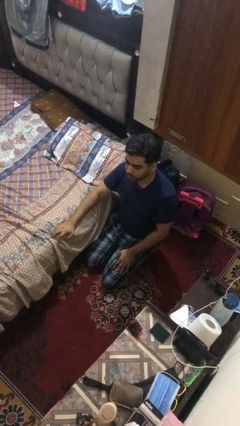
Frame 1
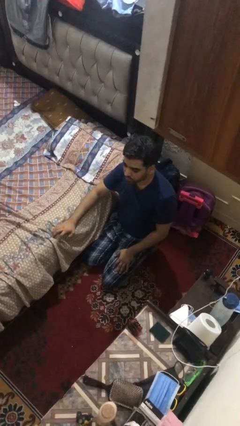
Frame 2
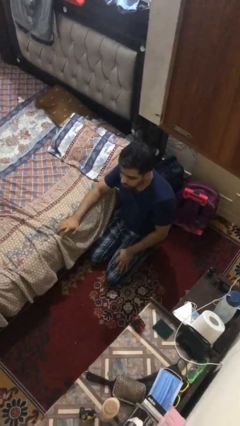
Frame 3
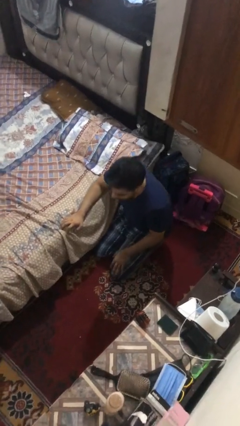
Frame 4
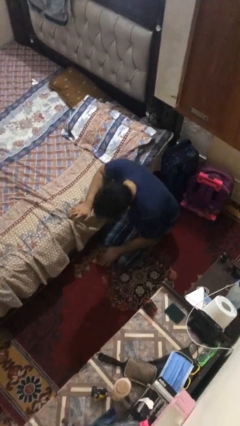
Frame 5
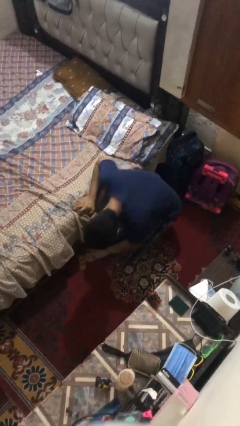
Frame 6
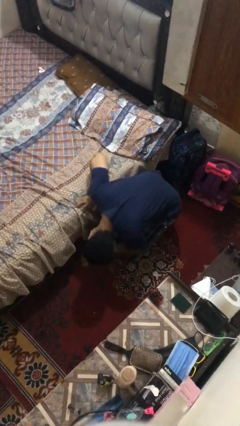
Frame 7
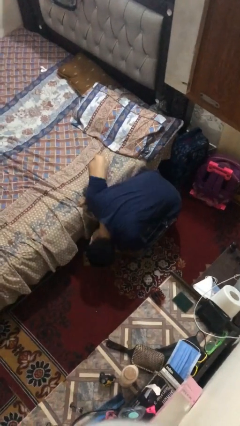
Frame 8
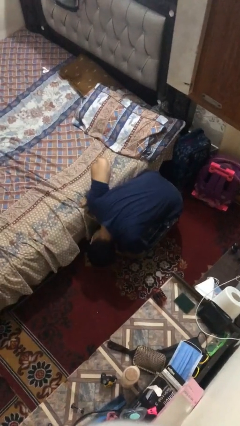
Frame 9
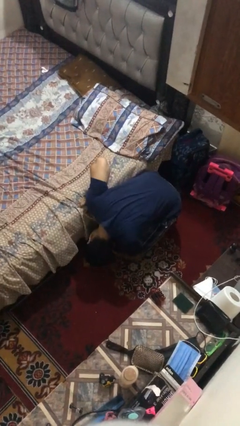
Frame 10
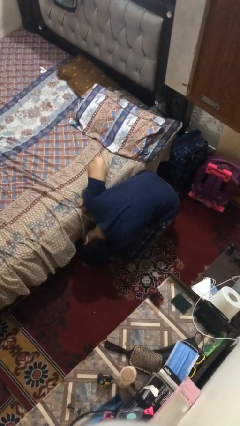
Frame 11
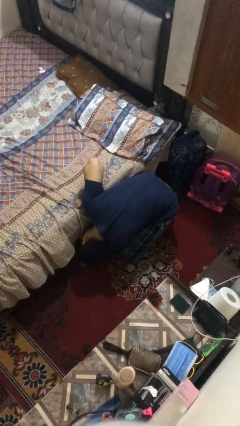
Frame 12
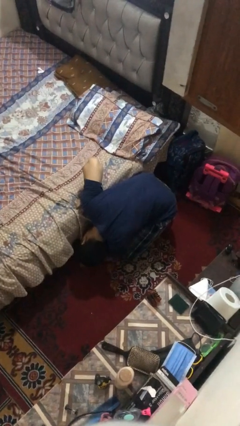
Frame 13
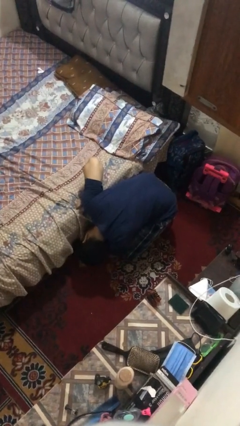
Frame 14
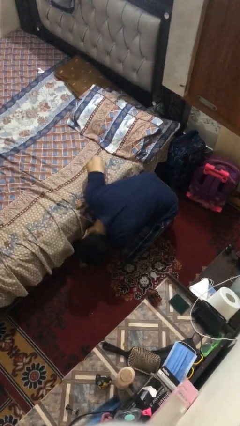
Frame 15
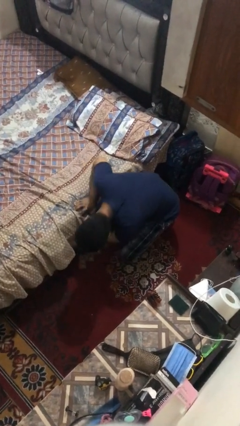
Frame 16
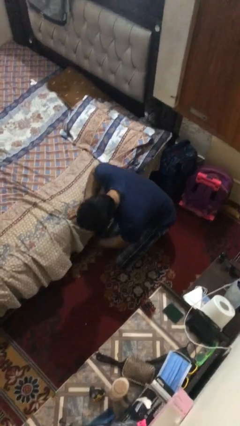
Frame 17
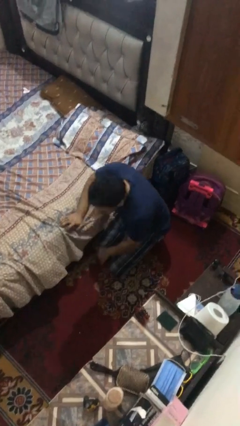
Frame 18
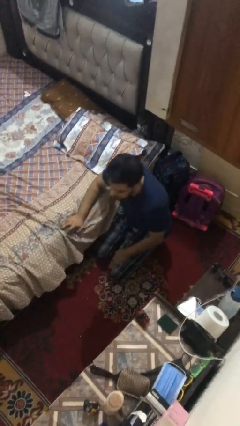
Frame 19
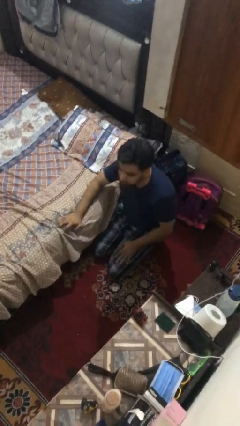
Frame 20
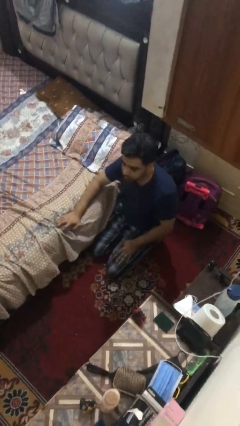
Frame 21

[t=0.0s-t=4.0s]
person searches under bed

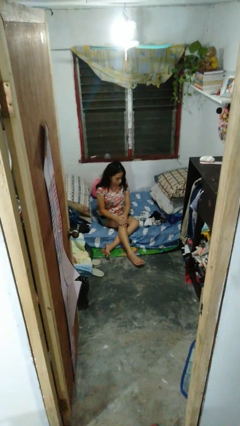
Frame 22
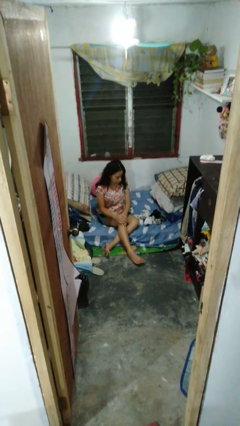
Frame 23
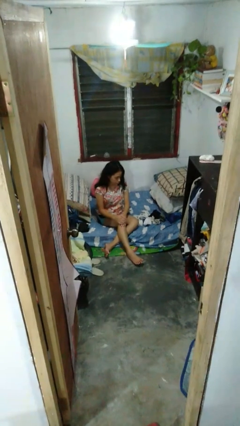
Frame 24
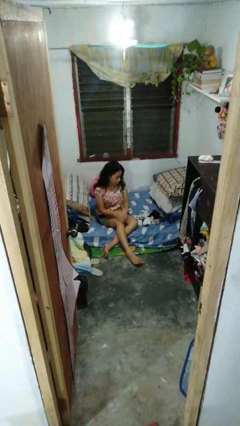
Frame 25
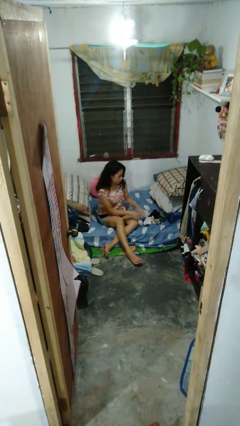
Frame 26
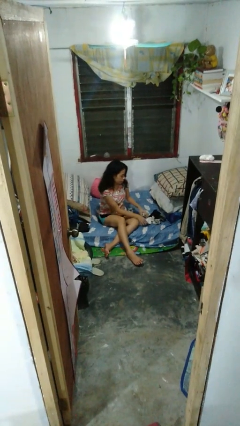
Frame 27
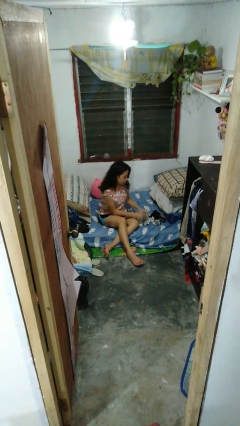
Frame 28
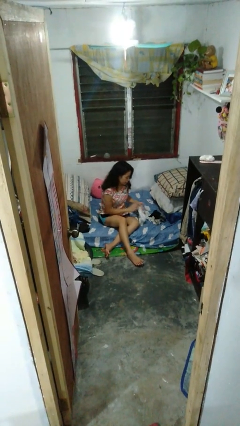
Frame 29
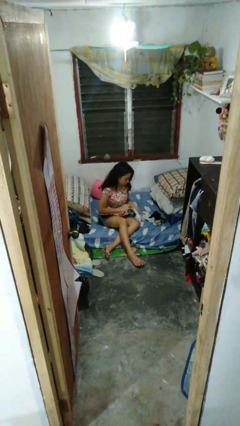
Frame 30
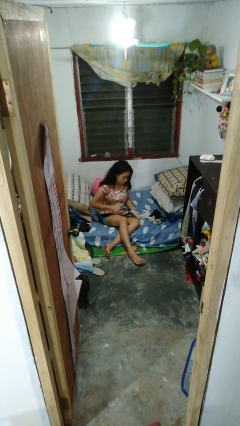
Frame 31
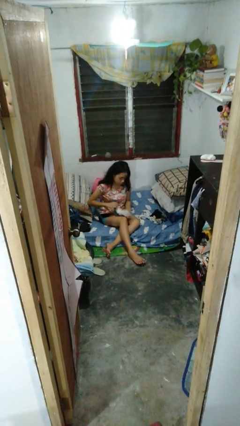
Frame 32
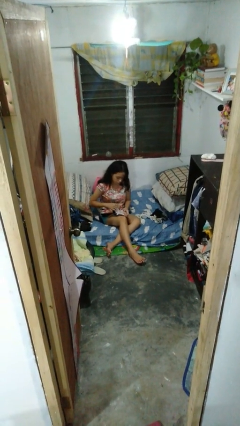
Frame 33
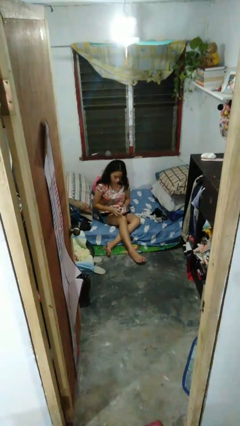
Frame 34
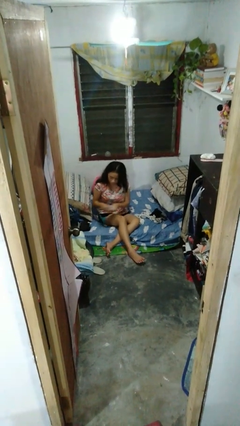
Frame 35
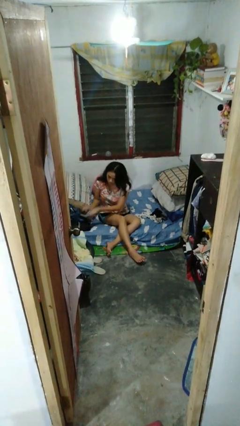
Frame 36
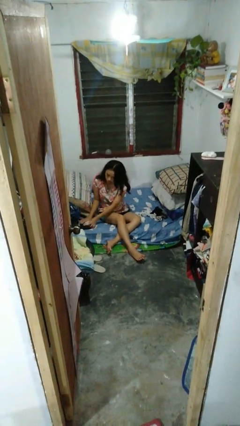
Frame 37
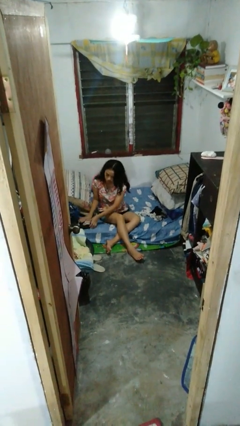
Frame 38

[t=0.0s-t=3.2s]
person folds socks

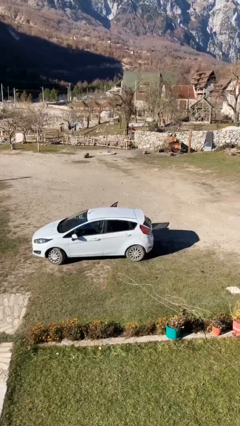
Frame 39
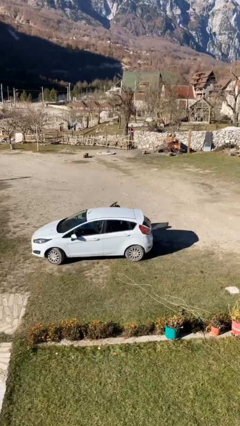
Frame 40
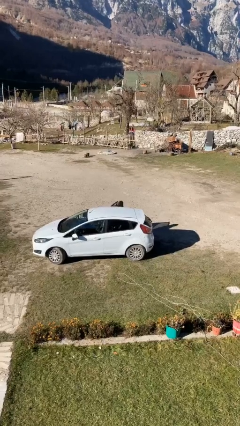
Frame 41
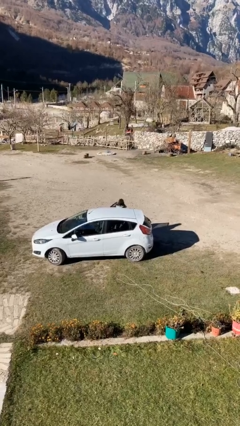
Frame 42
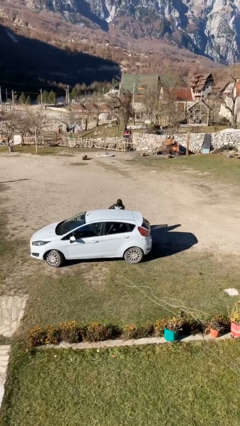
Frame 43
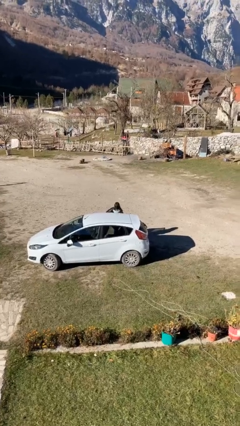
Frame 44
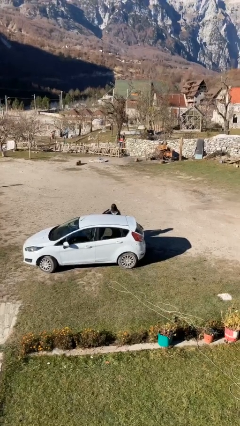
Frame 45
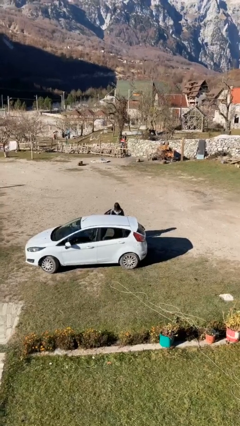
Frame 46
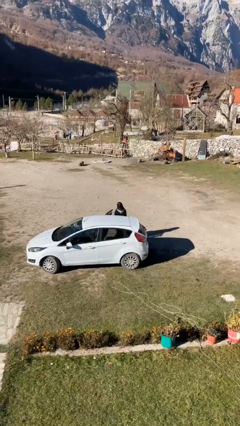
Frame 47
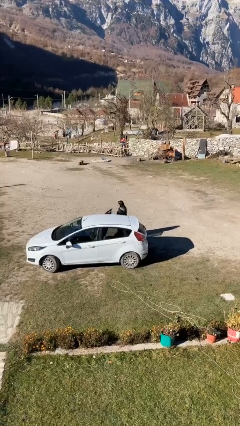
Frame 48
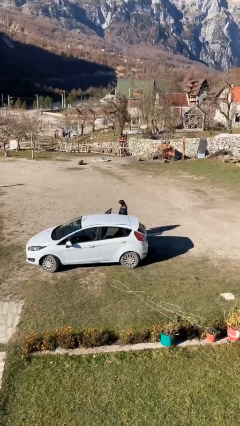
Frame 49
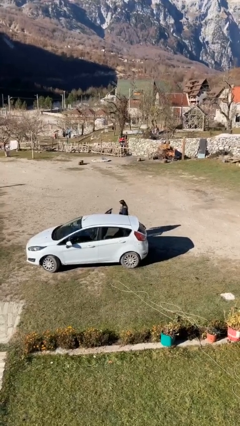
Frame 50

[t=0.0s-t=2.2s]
person exits car

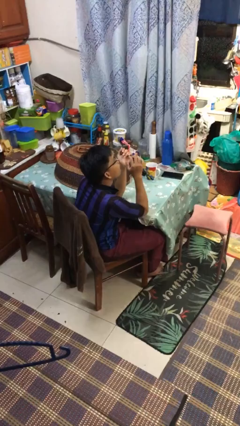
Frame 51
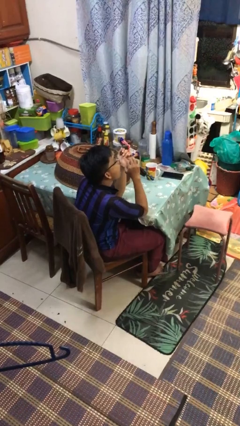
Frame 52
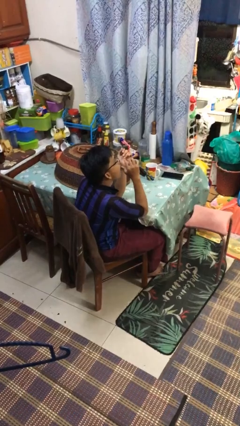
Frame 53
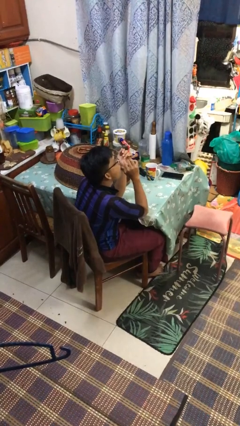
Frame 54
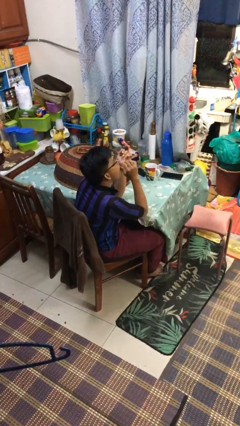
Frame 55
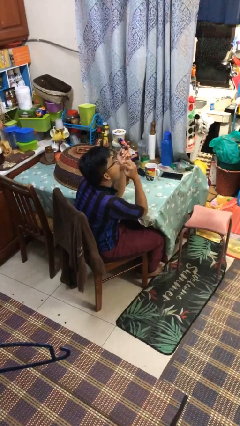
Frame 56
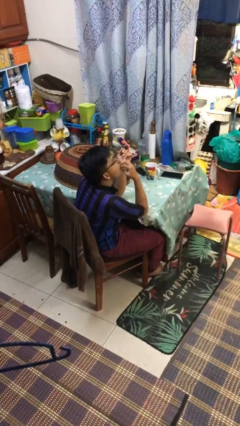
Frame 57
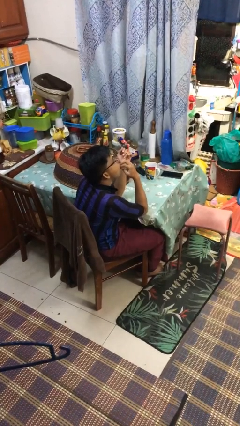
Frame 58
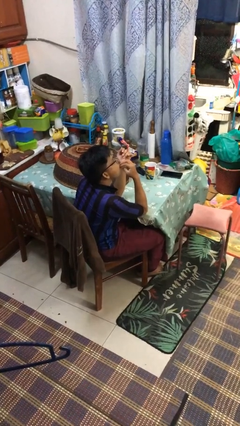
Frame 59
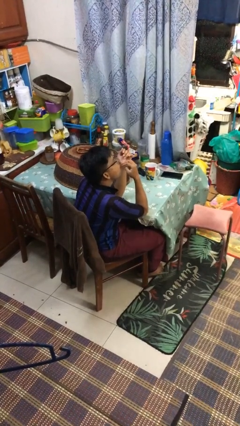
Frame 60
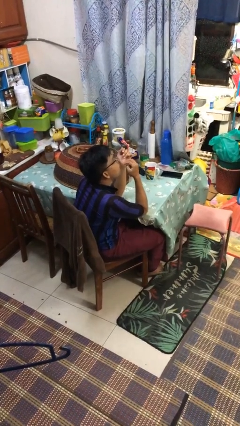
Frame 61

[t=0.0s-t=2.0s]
person licks fingers

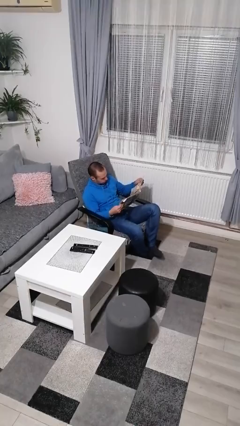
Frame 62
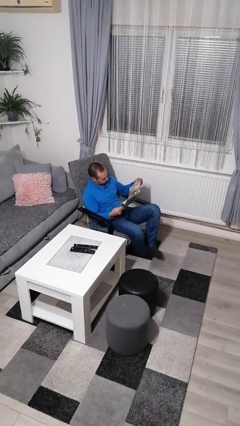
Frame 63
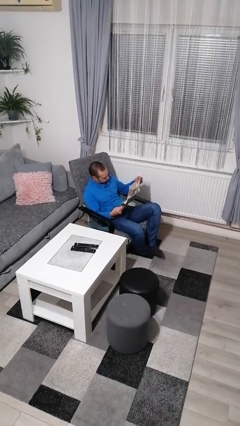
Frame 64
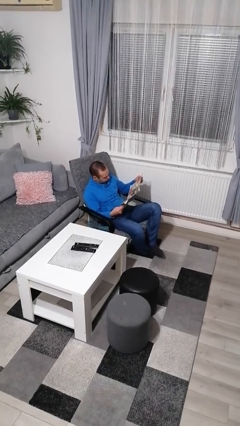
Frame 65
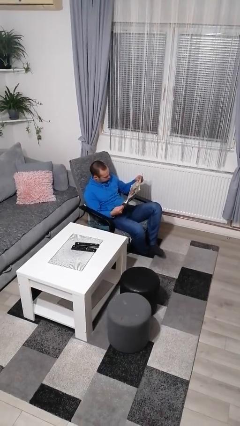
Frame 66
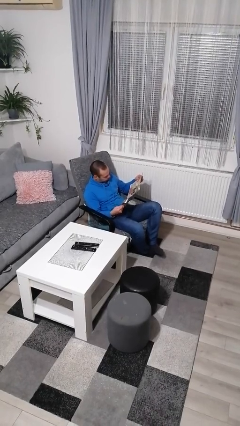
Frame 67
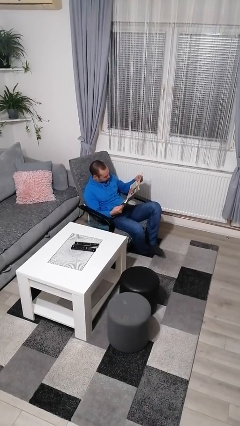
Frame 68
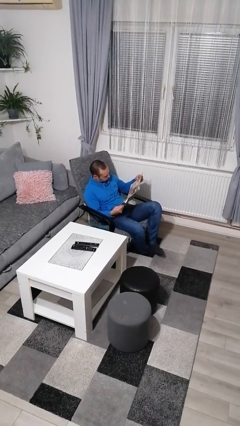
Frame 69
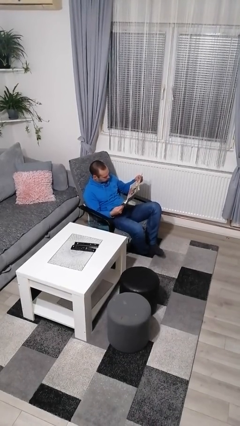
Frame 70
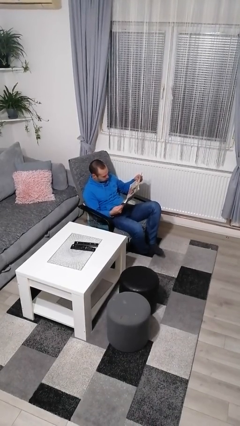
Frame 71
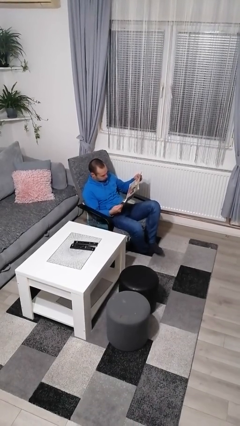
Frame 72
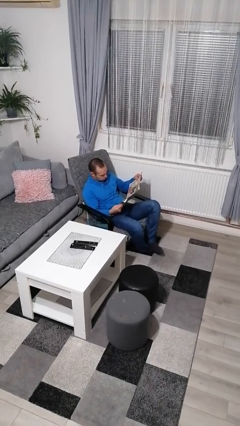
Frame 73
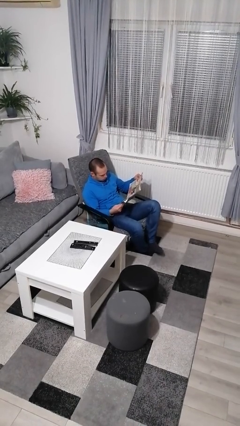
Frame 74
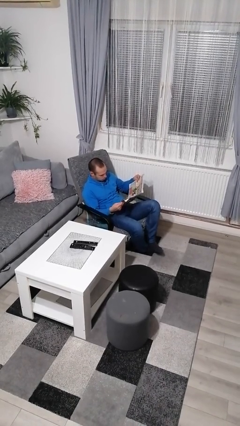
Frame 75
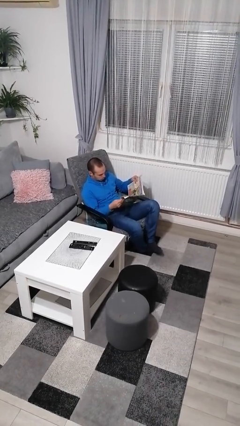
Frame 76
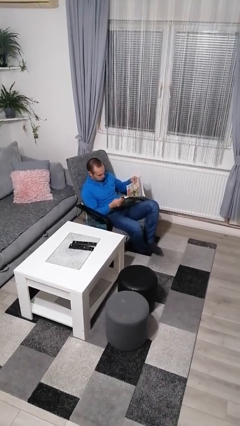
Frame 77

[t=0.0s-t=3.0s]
person reads newspaper

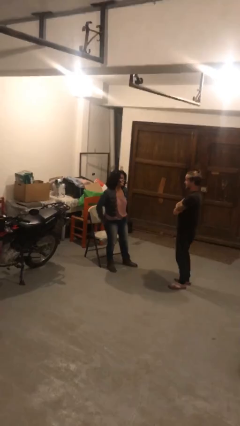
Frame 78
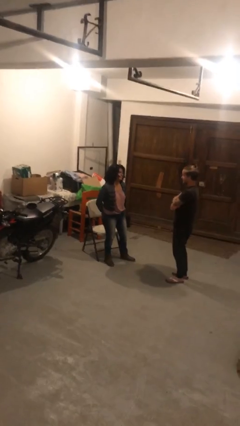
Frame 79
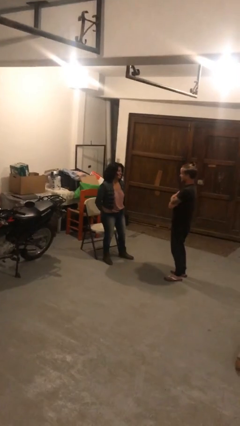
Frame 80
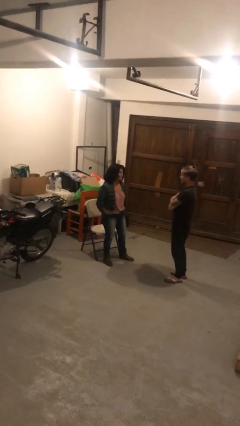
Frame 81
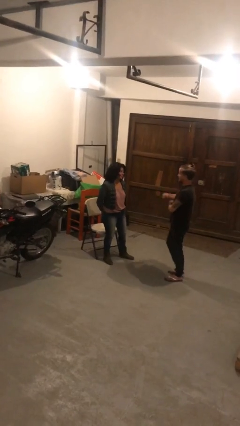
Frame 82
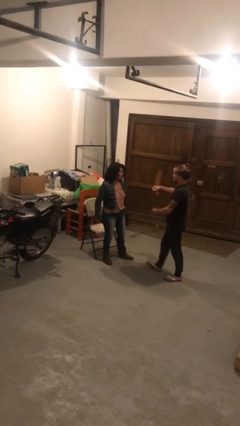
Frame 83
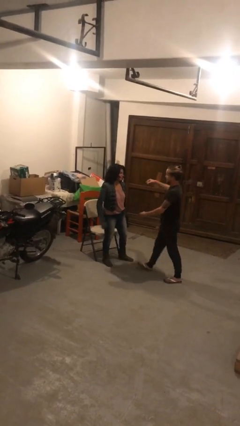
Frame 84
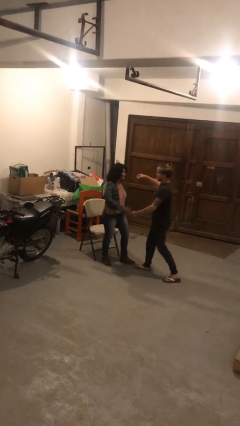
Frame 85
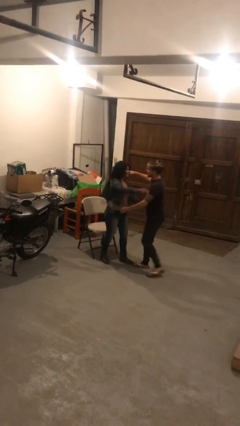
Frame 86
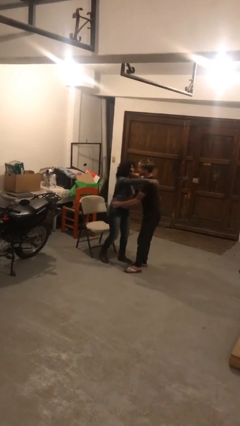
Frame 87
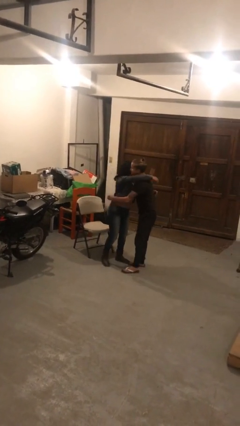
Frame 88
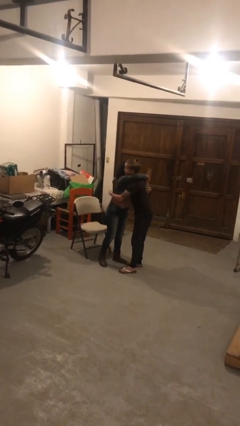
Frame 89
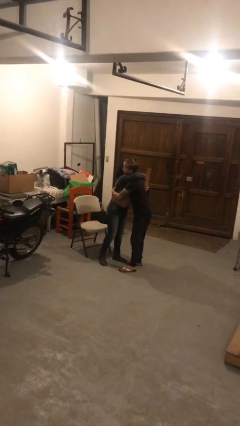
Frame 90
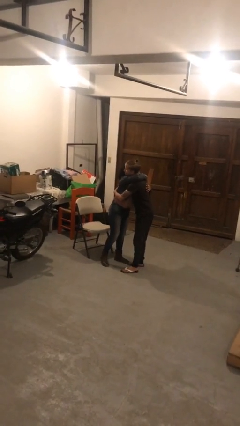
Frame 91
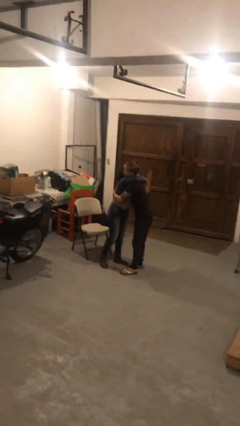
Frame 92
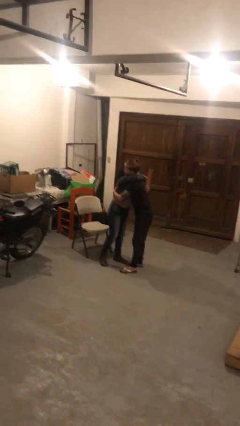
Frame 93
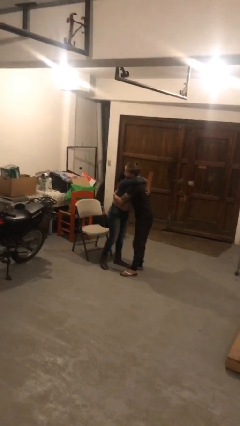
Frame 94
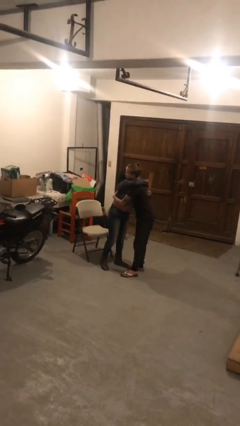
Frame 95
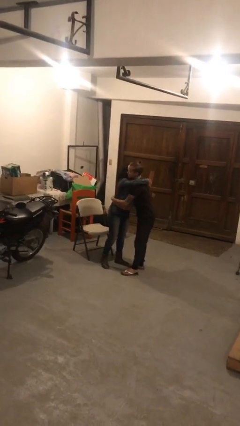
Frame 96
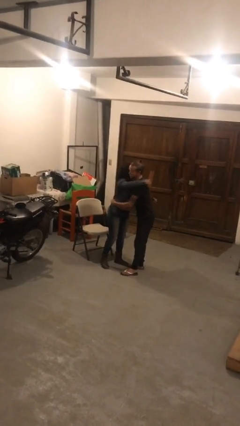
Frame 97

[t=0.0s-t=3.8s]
person embraces person
